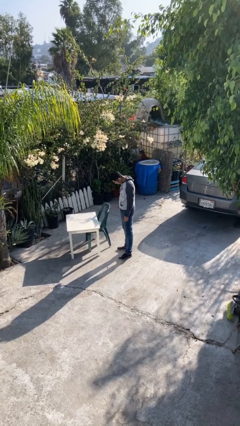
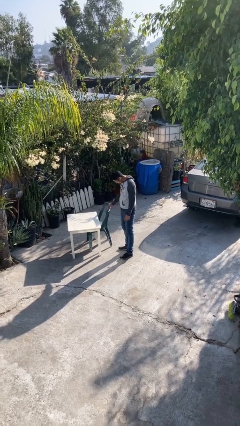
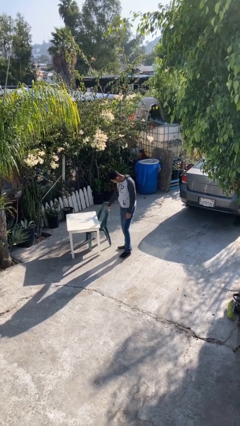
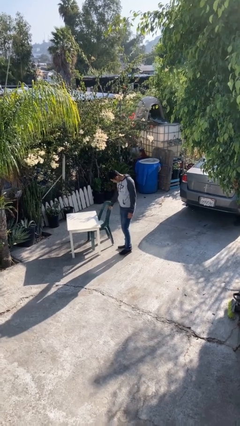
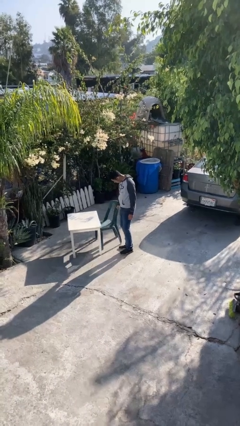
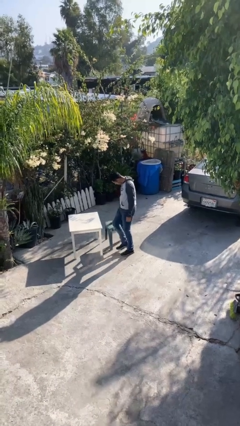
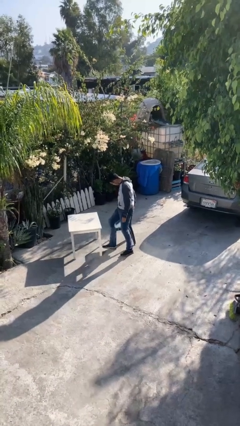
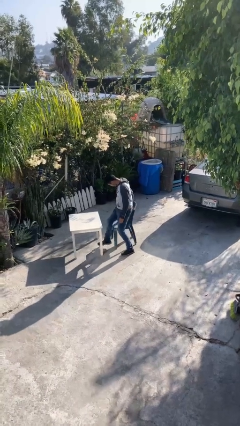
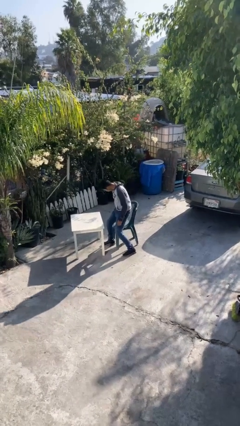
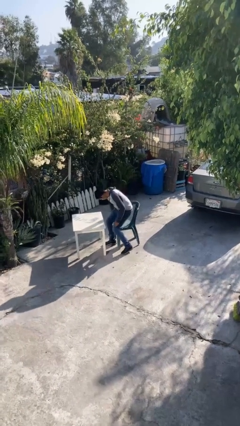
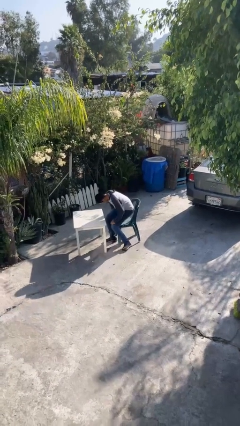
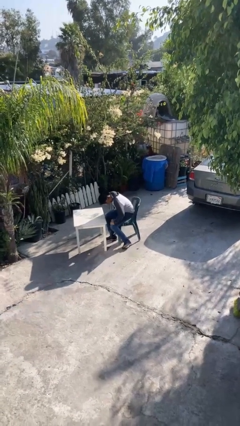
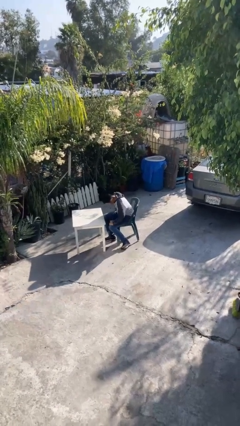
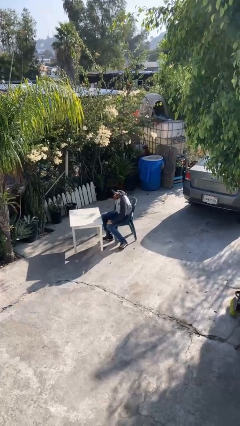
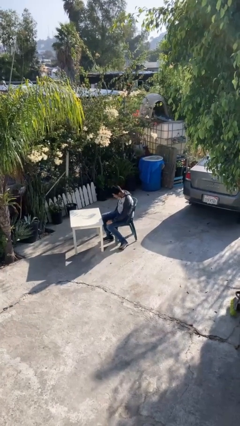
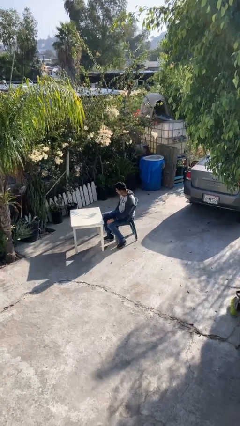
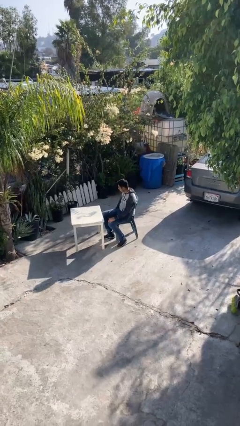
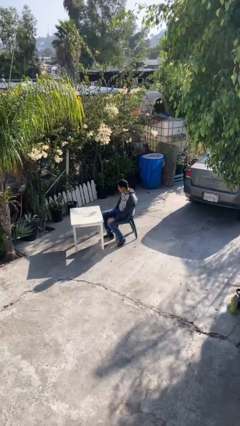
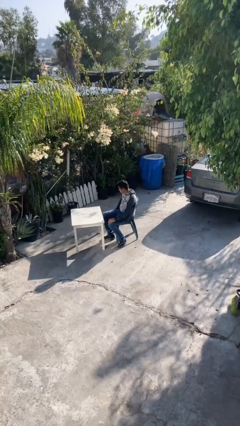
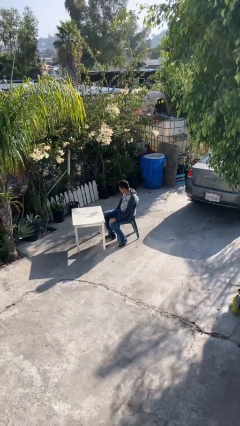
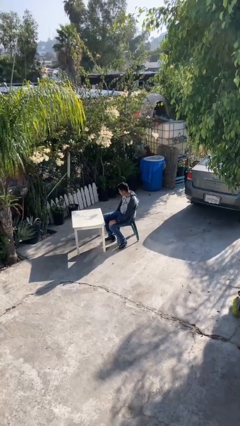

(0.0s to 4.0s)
person sits down

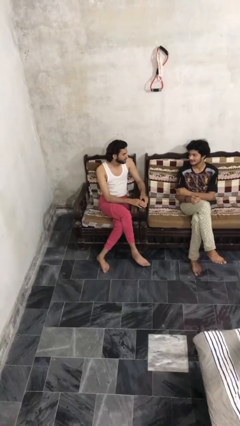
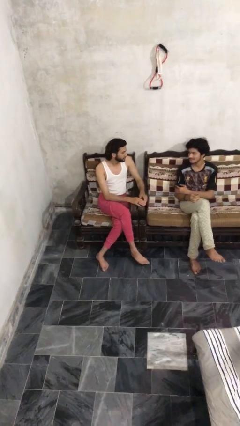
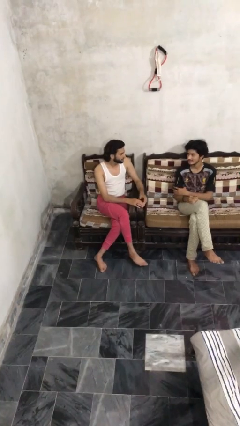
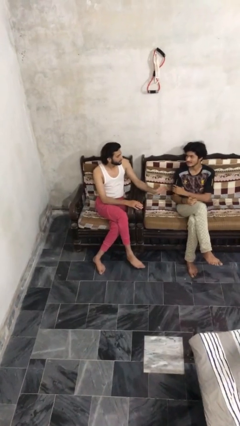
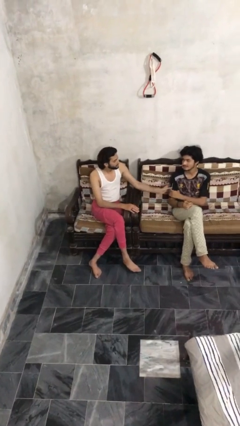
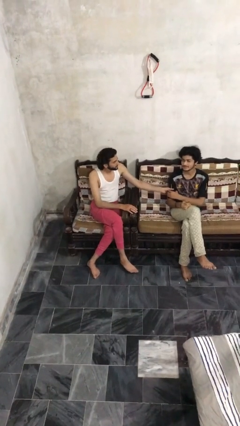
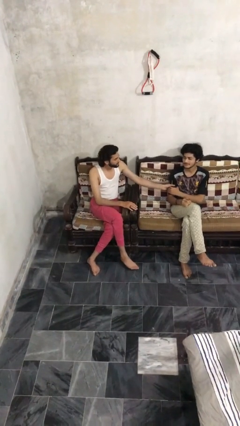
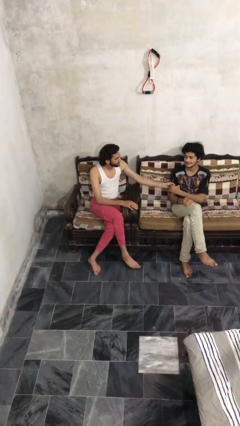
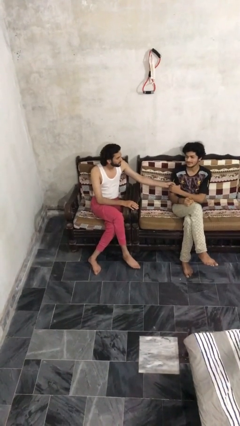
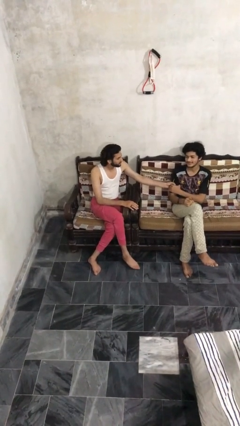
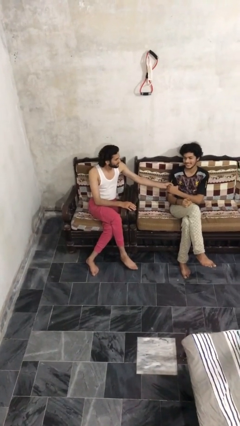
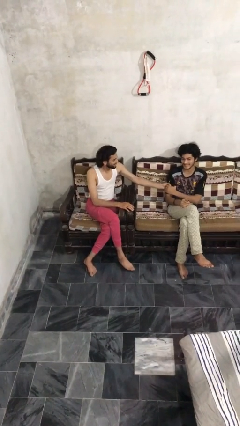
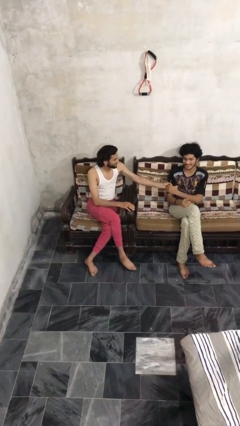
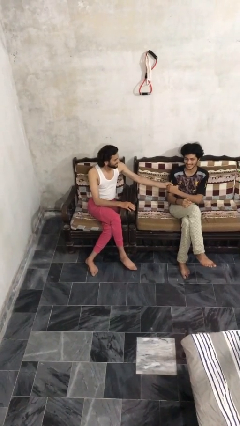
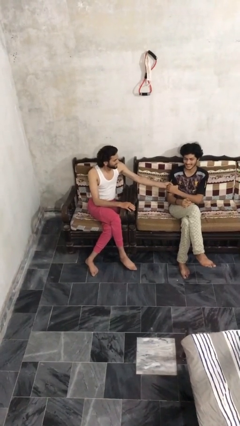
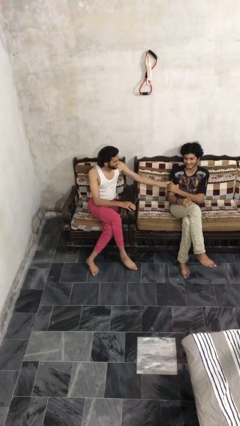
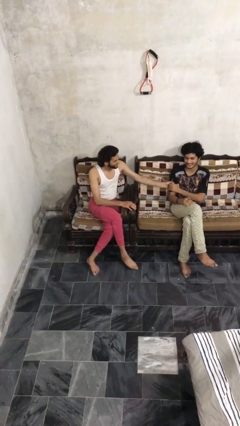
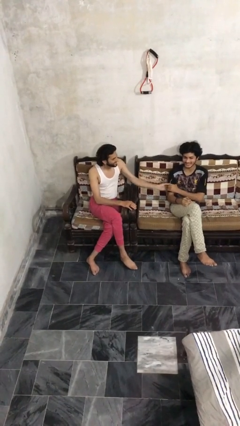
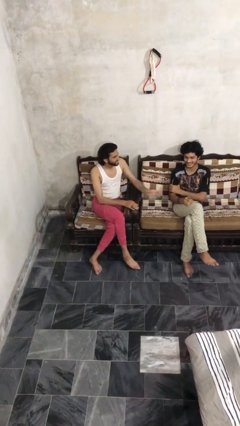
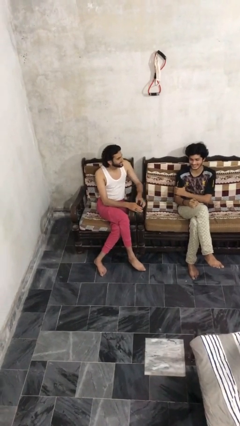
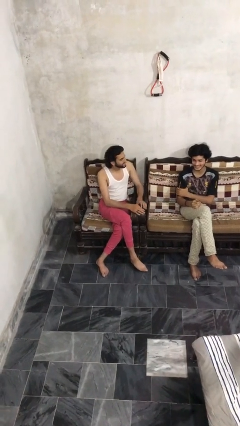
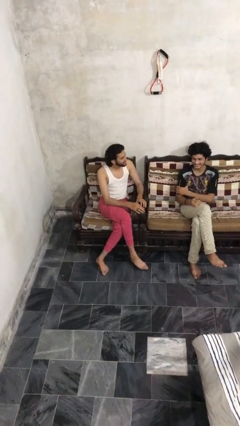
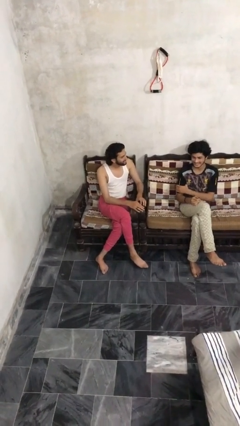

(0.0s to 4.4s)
person grabs person by bicep

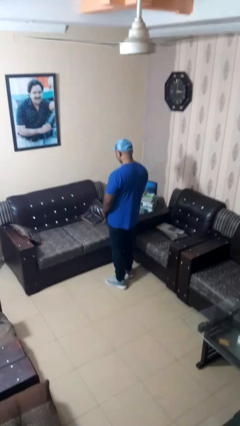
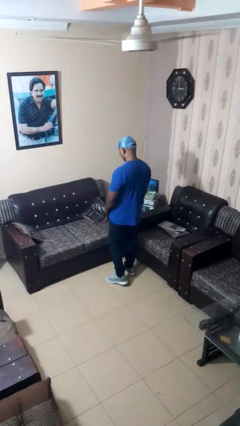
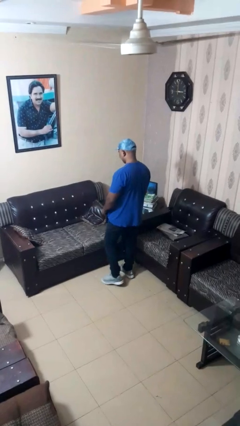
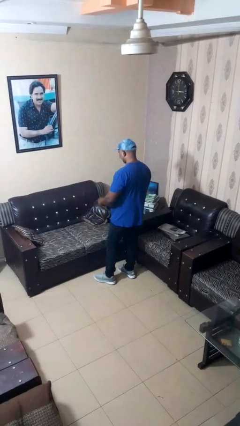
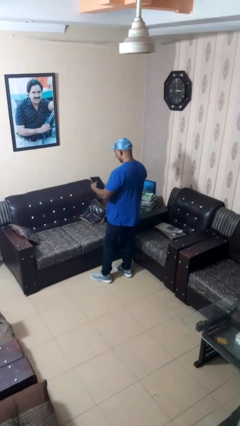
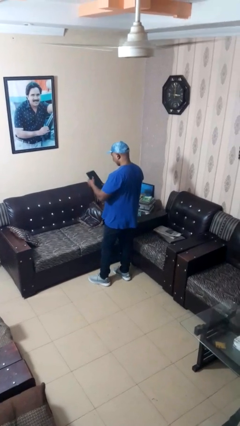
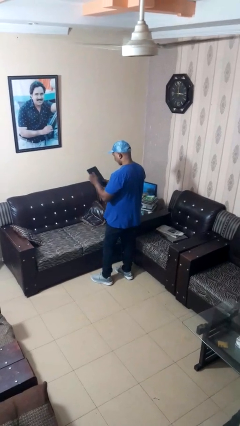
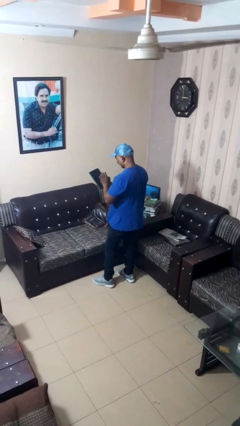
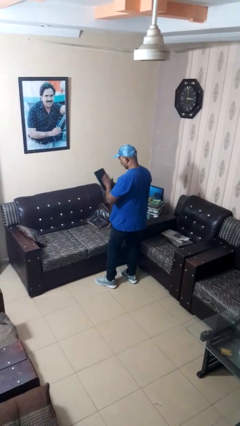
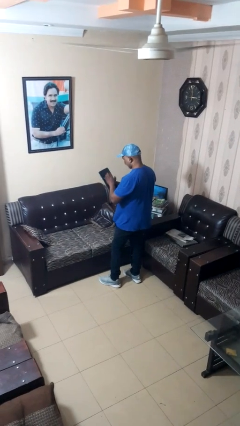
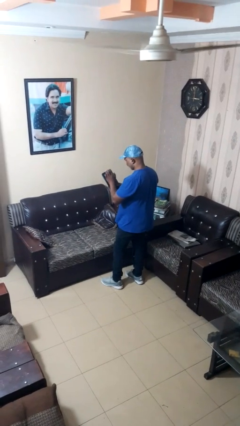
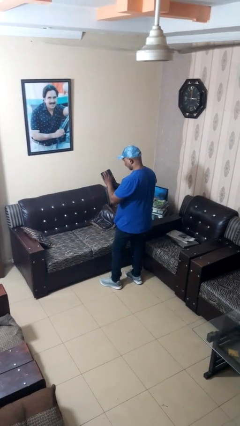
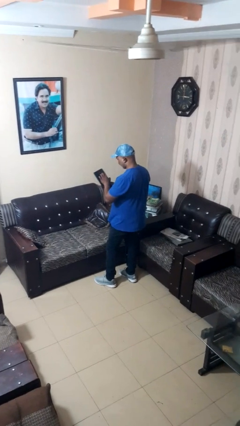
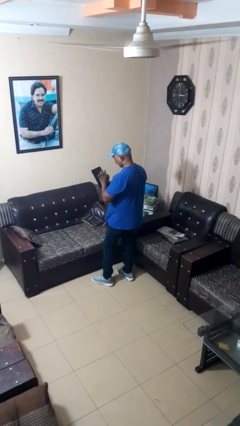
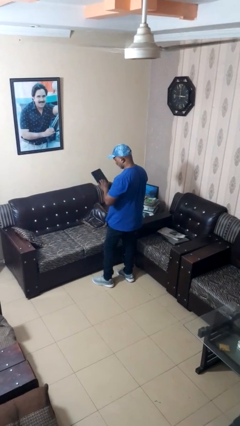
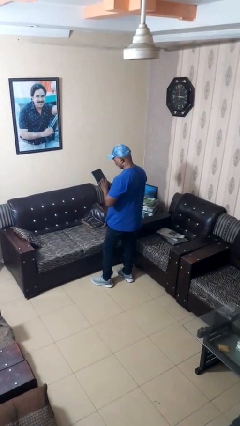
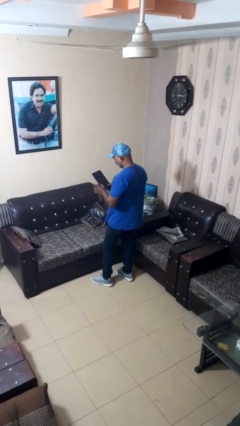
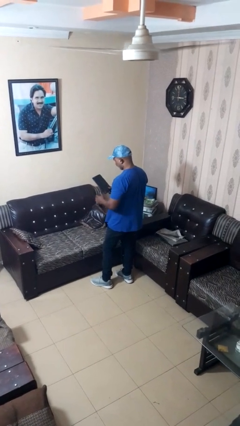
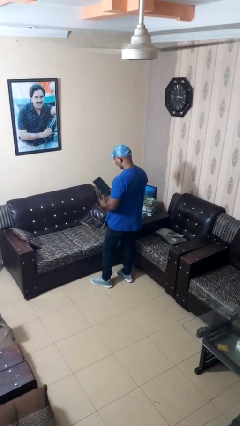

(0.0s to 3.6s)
person taps object with finger

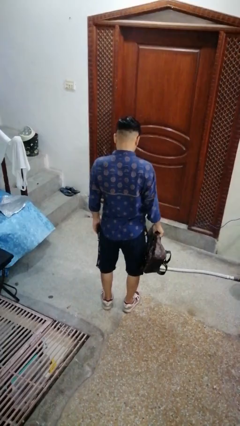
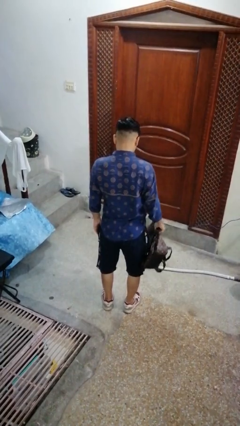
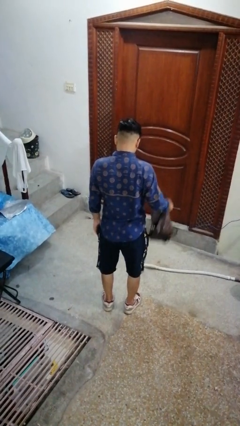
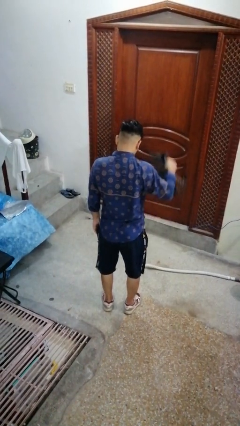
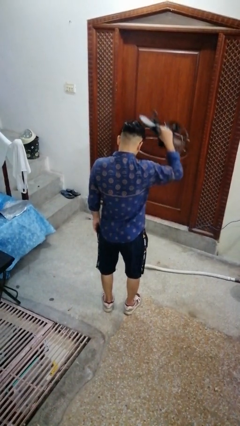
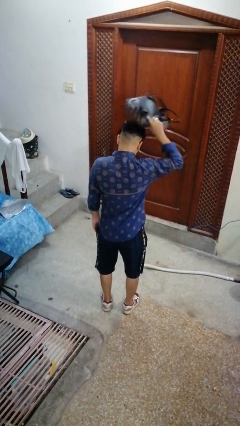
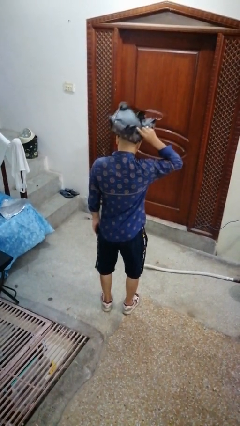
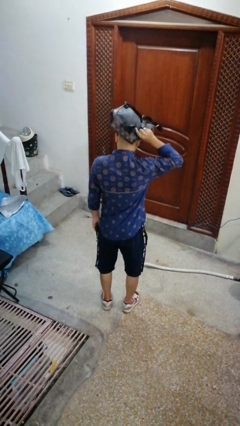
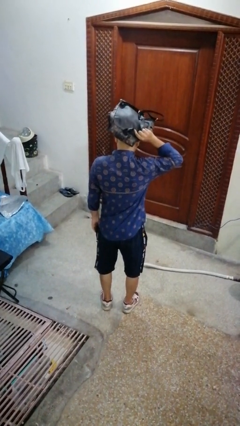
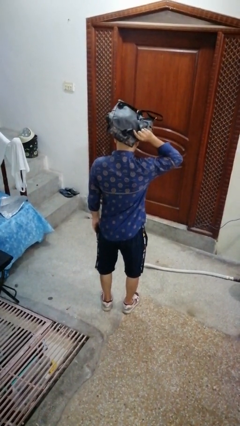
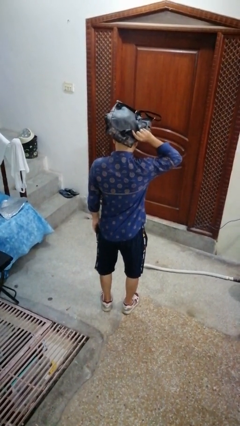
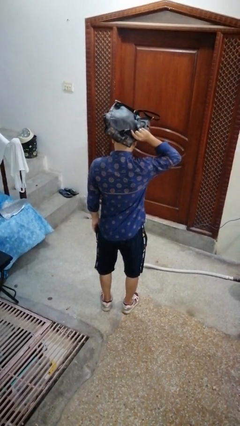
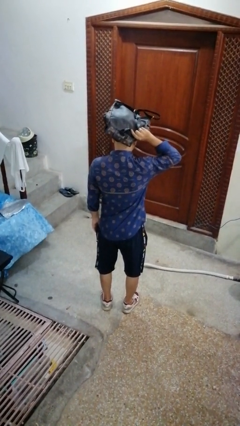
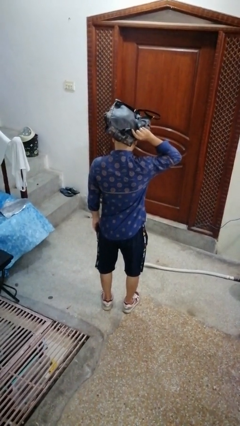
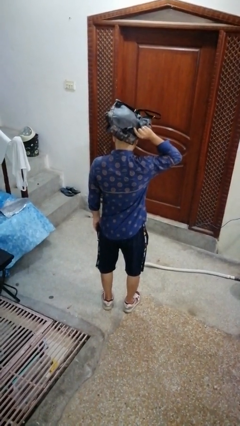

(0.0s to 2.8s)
person holds object above head

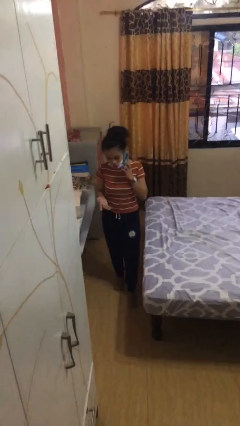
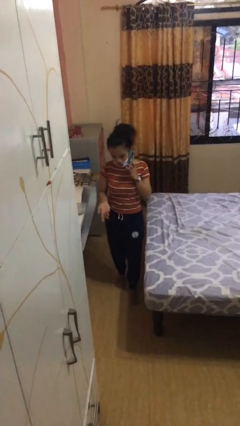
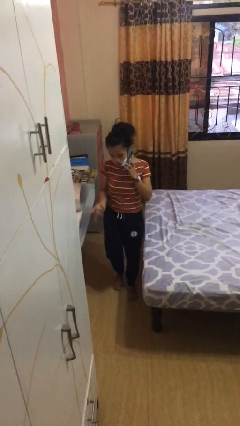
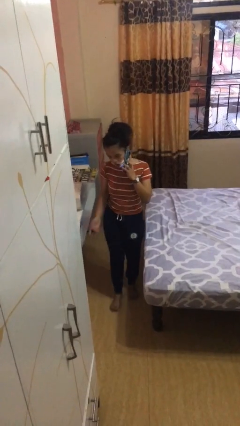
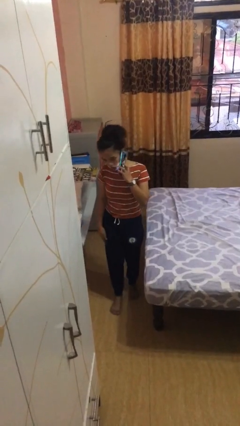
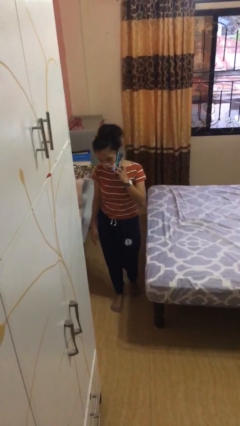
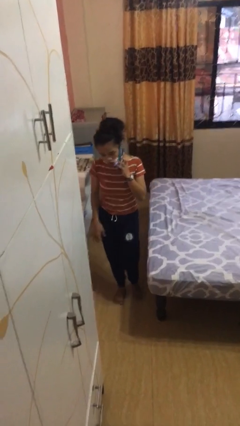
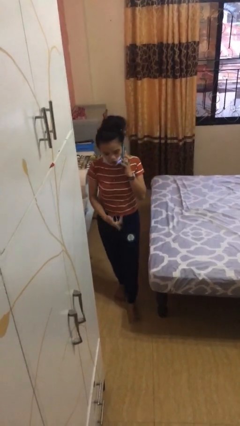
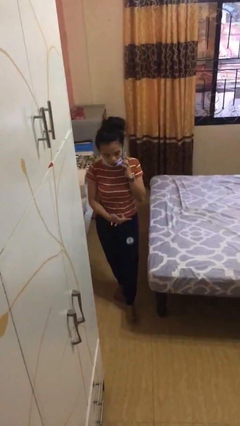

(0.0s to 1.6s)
person talks on phone

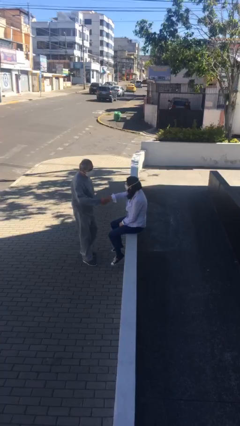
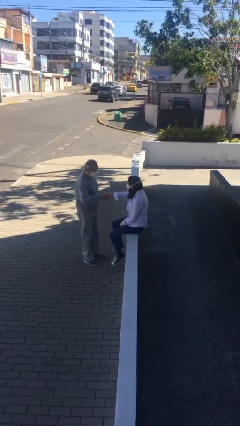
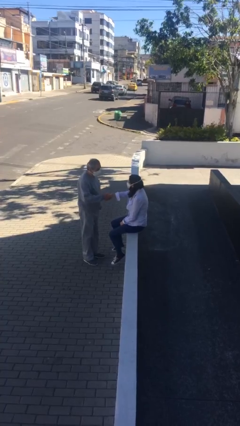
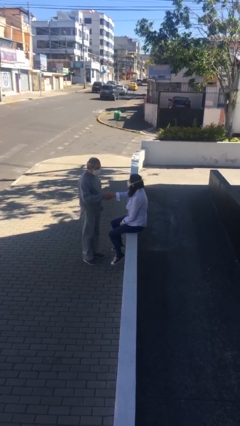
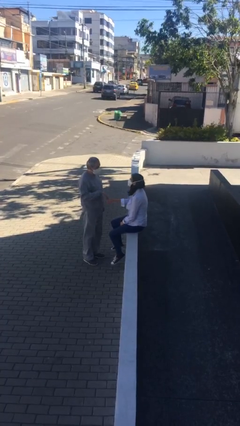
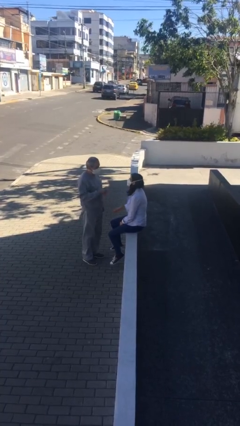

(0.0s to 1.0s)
person shakes hand
